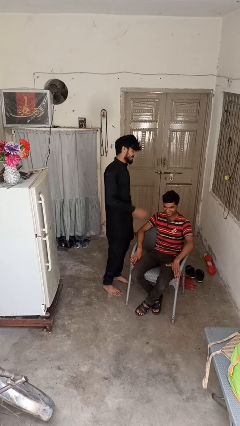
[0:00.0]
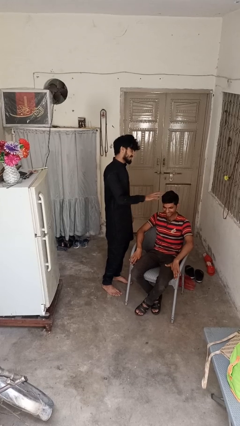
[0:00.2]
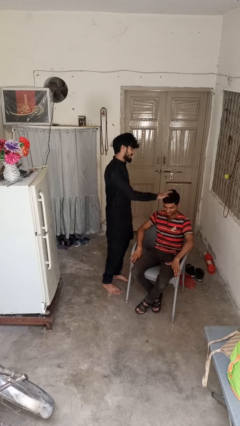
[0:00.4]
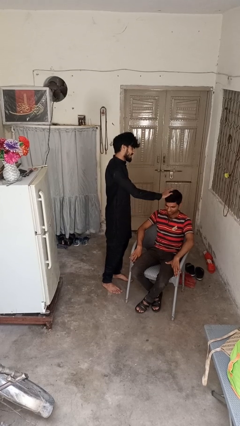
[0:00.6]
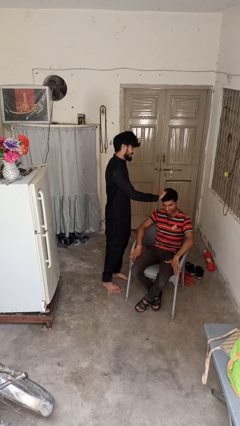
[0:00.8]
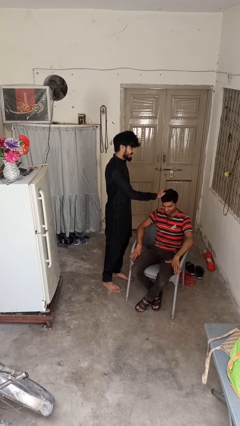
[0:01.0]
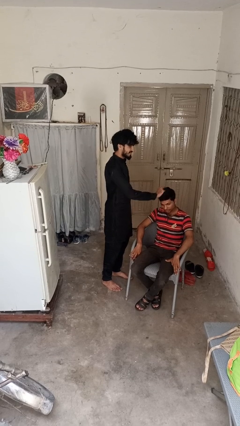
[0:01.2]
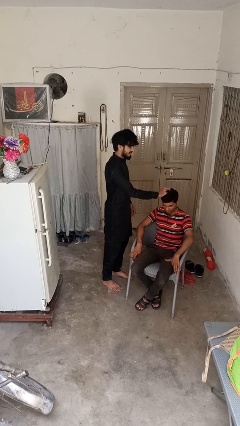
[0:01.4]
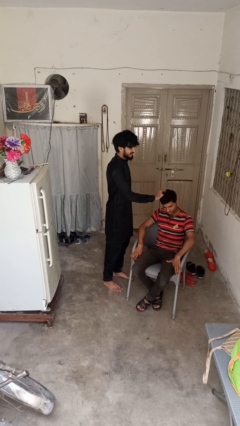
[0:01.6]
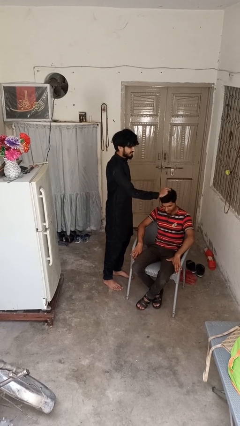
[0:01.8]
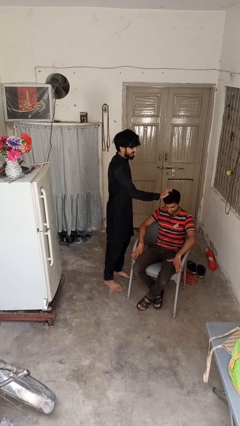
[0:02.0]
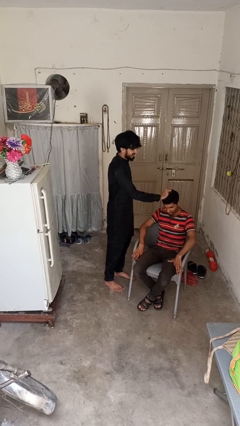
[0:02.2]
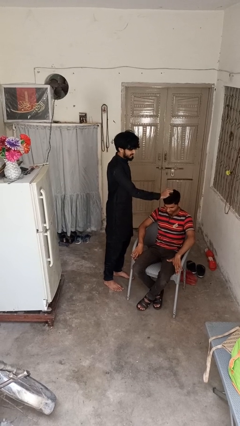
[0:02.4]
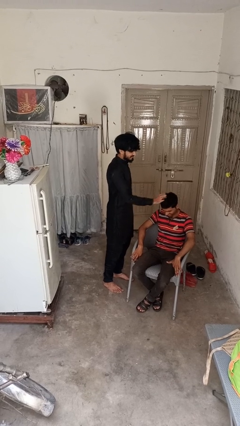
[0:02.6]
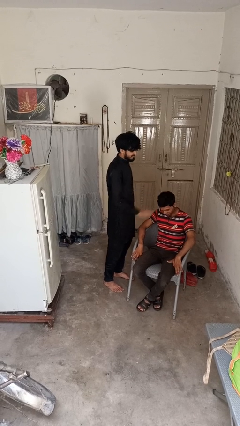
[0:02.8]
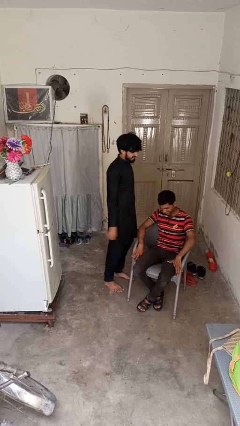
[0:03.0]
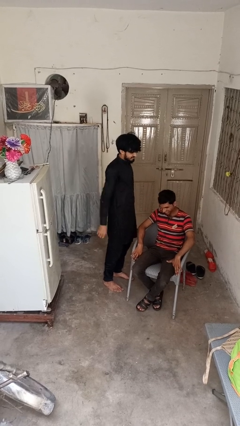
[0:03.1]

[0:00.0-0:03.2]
person grabs person by hair

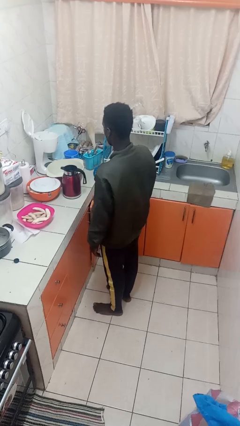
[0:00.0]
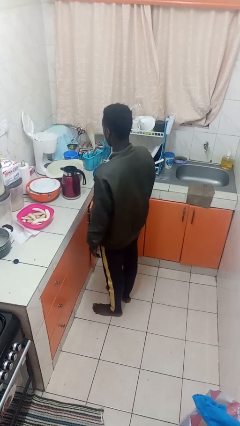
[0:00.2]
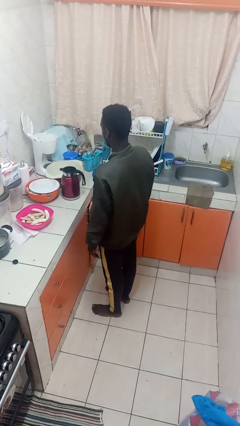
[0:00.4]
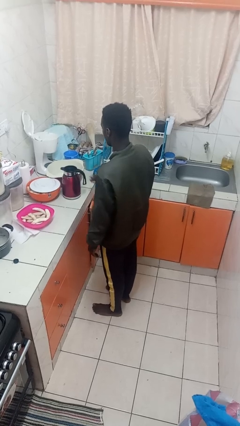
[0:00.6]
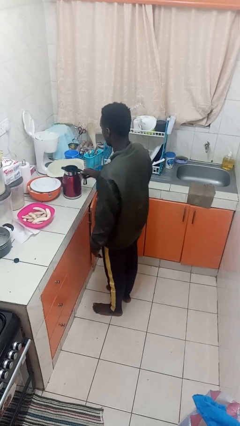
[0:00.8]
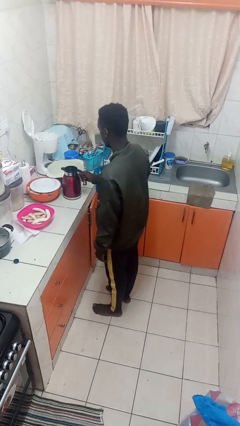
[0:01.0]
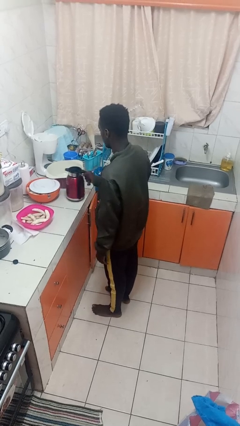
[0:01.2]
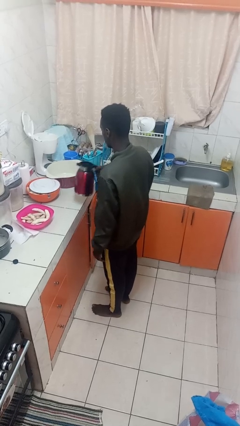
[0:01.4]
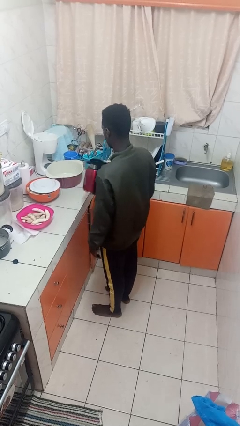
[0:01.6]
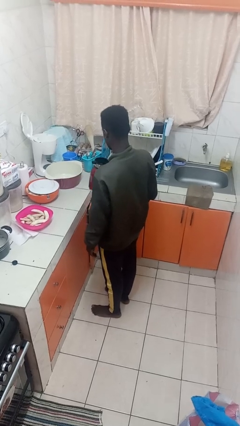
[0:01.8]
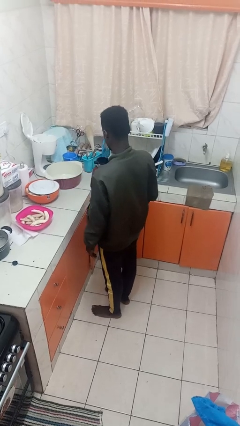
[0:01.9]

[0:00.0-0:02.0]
person picks up object from countertop

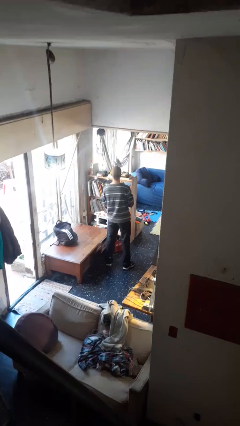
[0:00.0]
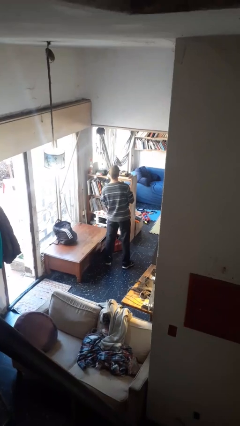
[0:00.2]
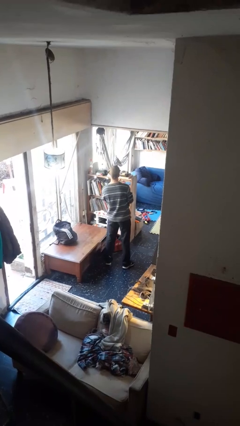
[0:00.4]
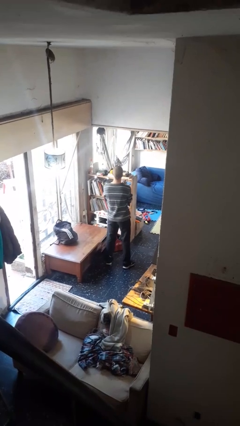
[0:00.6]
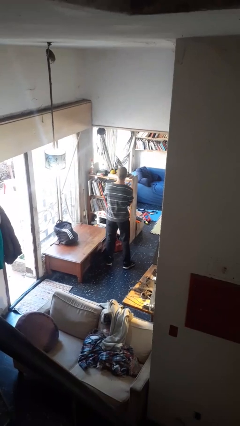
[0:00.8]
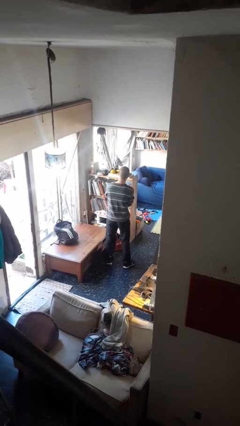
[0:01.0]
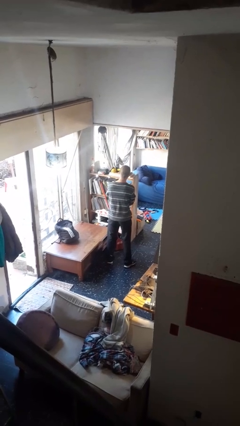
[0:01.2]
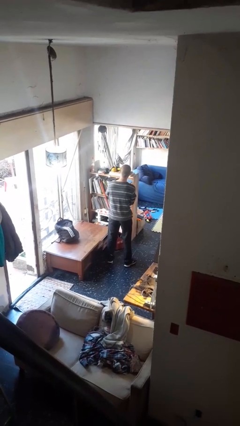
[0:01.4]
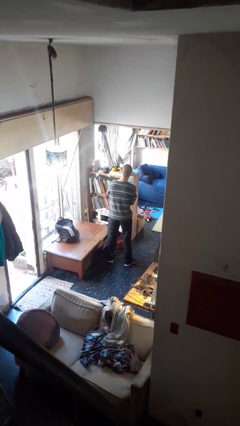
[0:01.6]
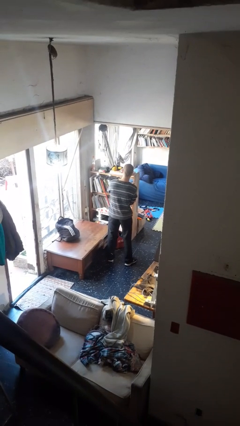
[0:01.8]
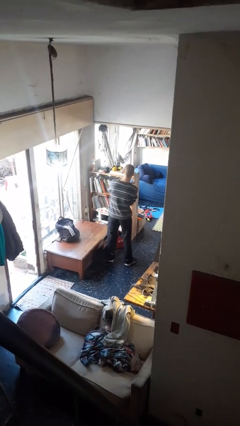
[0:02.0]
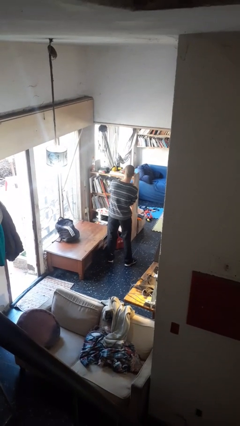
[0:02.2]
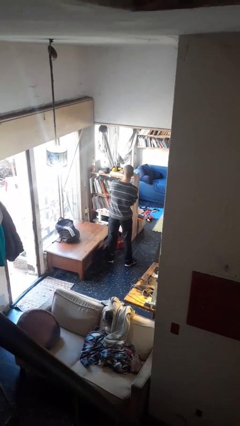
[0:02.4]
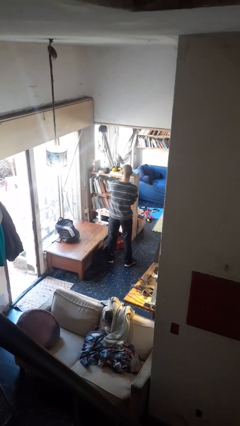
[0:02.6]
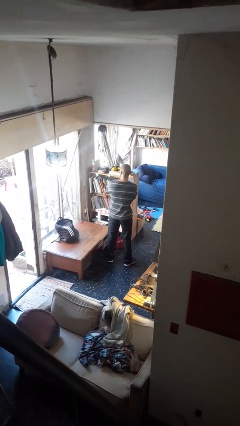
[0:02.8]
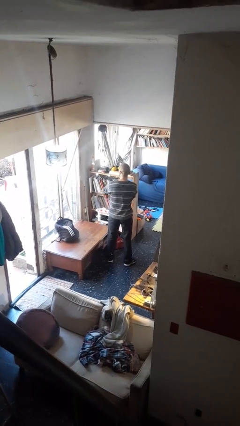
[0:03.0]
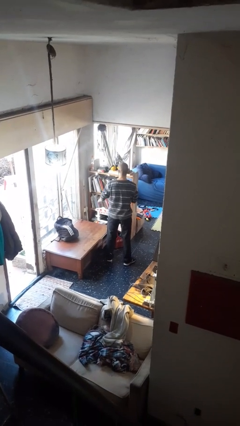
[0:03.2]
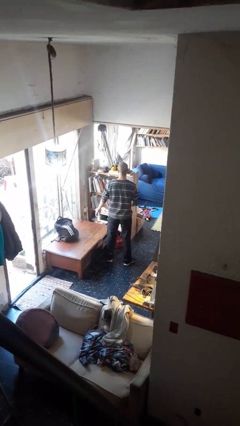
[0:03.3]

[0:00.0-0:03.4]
person puts on wristwatch

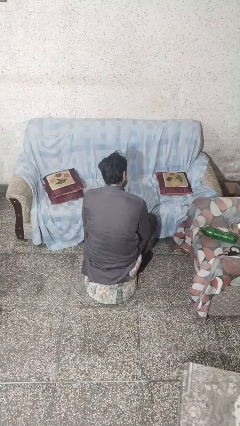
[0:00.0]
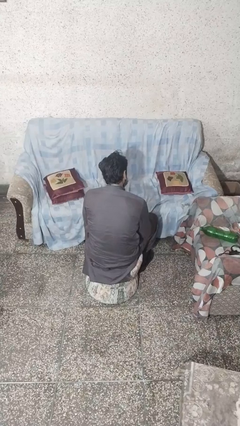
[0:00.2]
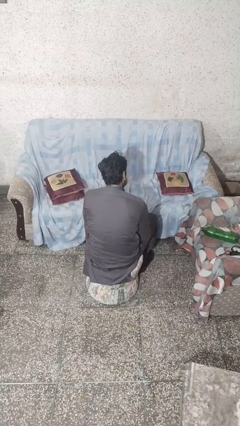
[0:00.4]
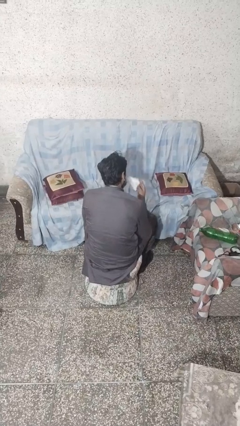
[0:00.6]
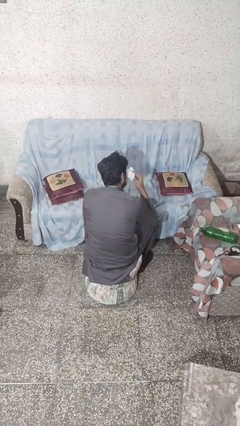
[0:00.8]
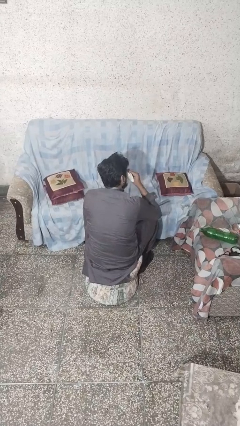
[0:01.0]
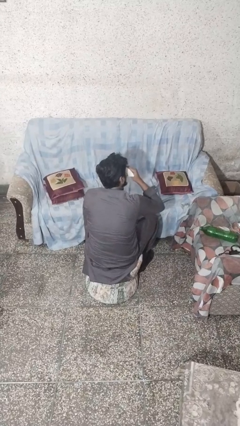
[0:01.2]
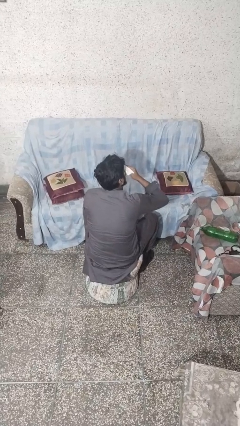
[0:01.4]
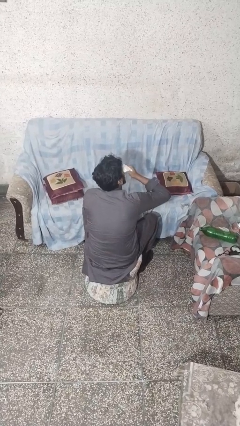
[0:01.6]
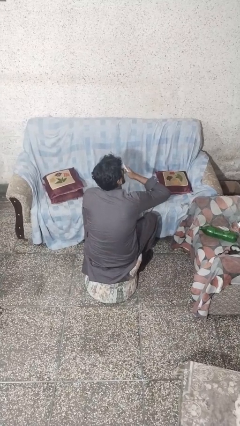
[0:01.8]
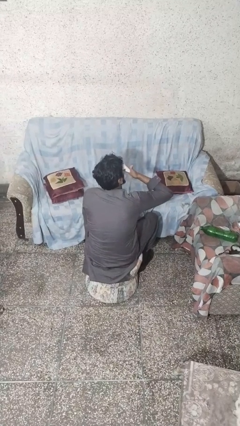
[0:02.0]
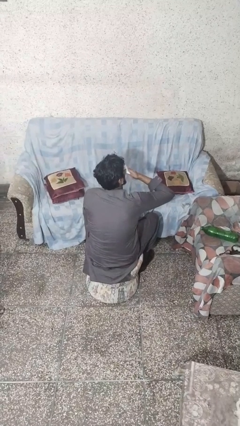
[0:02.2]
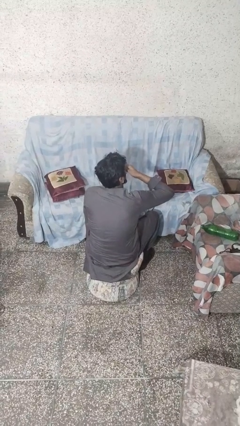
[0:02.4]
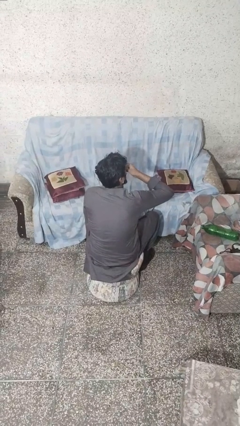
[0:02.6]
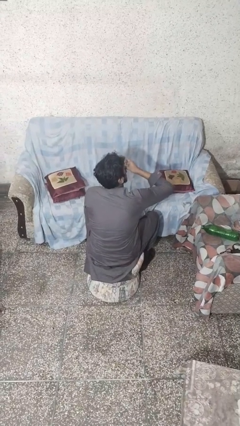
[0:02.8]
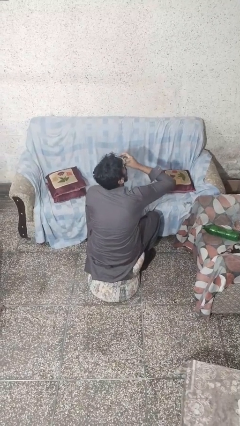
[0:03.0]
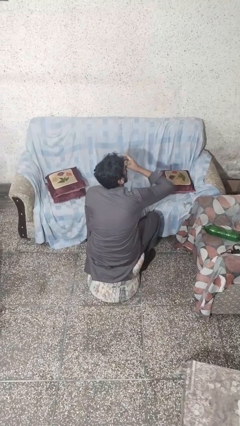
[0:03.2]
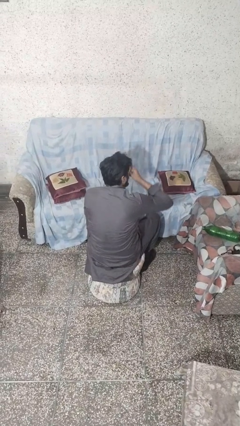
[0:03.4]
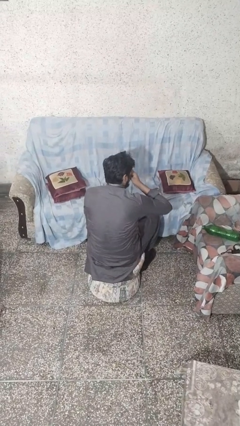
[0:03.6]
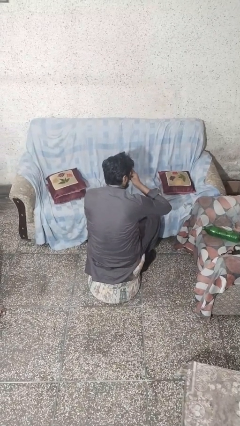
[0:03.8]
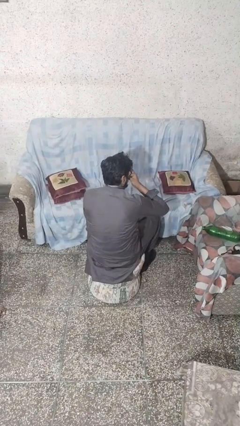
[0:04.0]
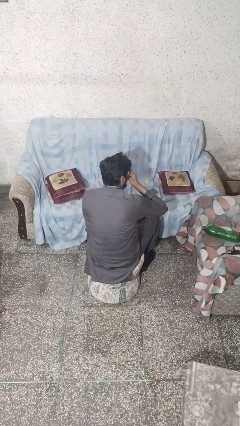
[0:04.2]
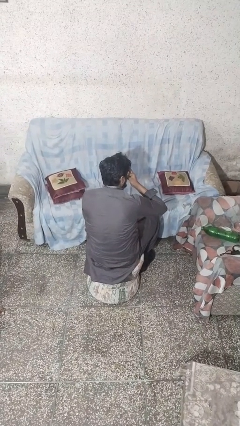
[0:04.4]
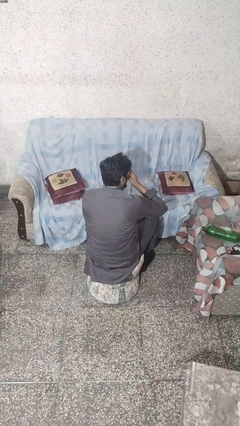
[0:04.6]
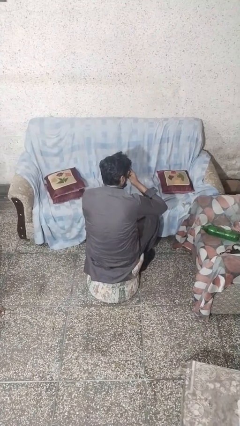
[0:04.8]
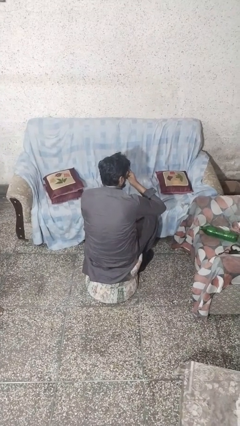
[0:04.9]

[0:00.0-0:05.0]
person blows nose

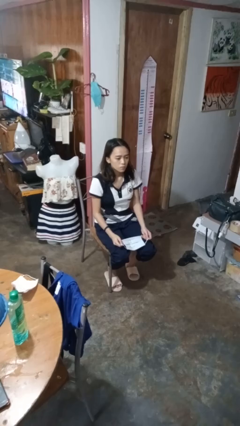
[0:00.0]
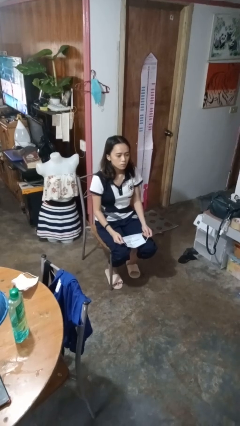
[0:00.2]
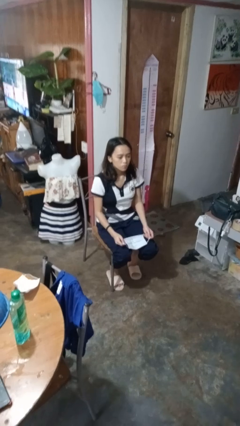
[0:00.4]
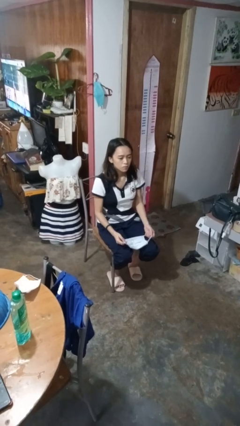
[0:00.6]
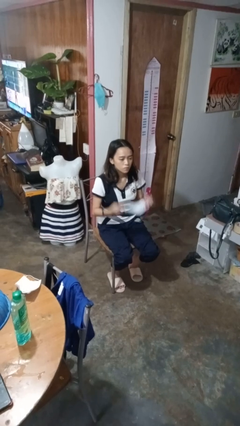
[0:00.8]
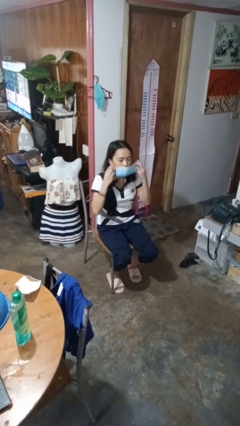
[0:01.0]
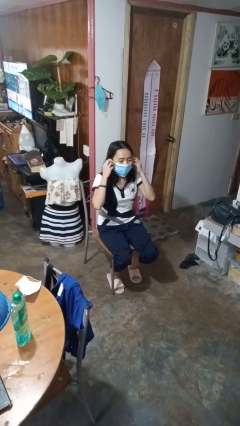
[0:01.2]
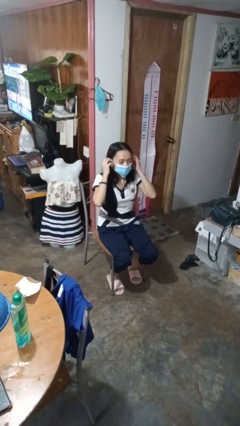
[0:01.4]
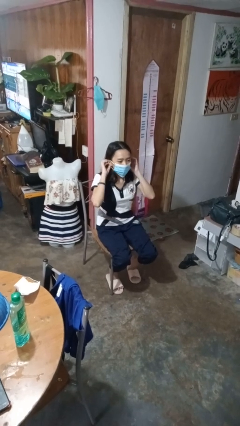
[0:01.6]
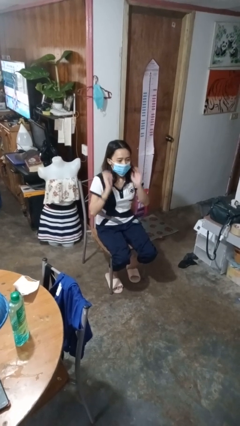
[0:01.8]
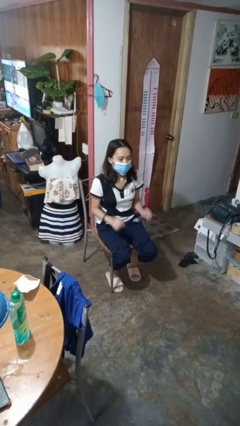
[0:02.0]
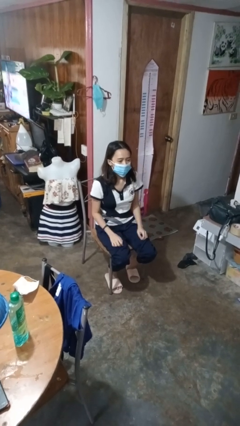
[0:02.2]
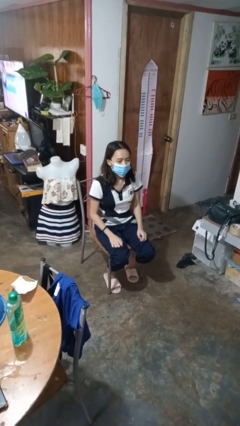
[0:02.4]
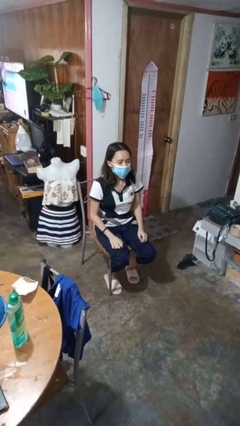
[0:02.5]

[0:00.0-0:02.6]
person puts on facemask

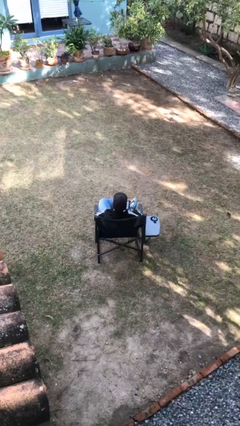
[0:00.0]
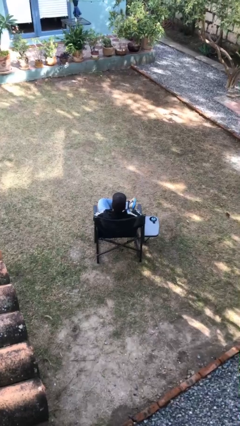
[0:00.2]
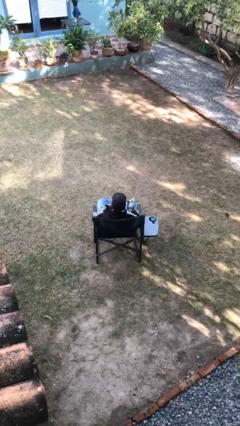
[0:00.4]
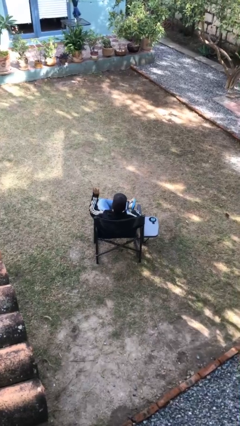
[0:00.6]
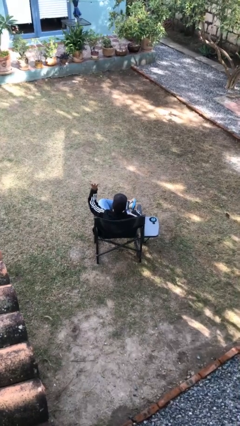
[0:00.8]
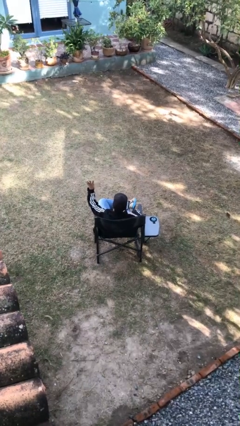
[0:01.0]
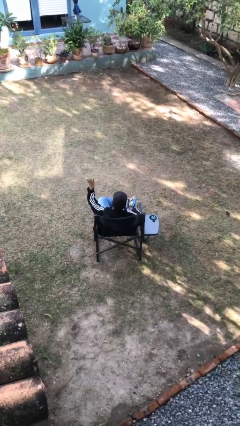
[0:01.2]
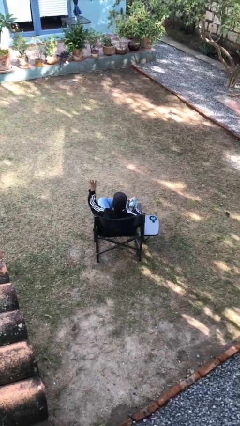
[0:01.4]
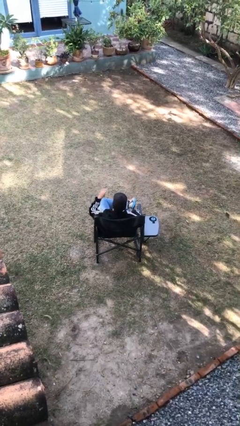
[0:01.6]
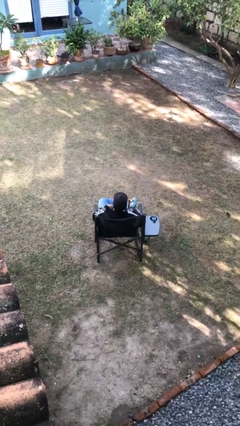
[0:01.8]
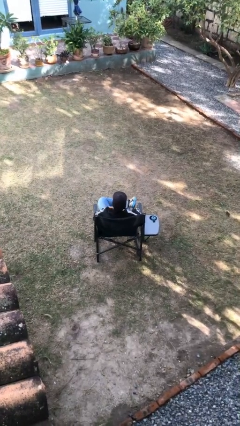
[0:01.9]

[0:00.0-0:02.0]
person gestures number four
